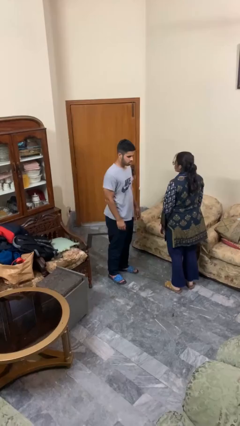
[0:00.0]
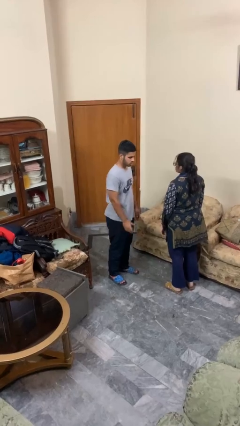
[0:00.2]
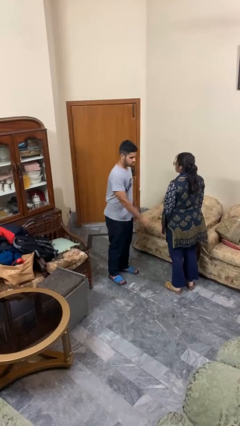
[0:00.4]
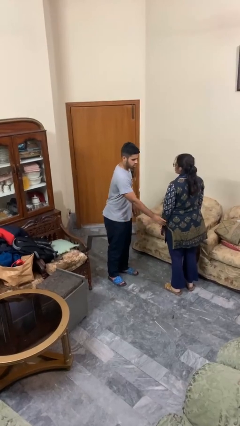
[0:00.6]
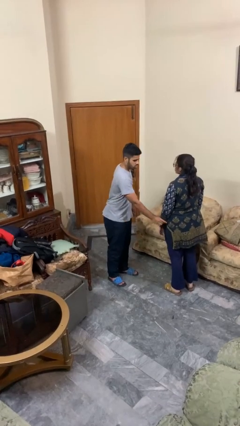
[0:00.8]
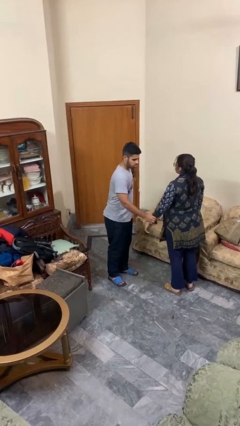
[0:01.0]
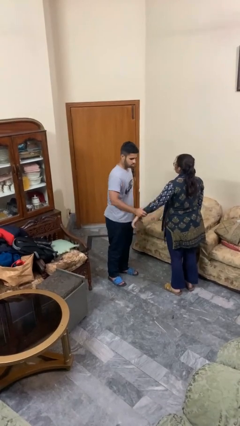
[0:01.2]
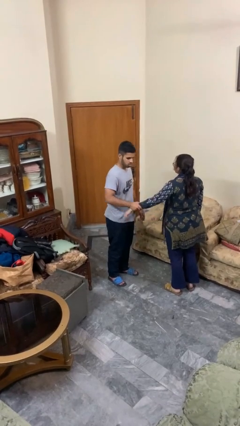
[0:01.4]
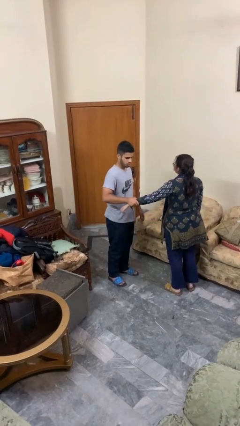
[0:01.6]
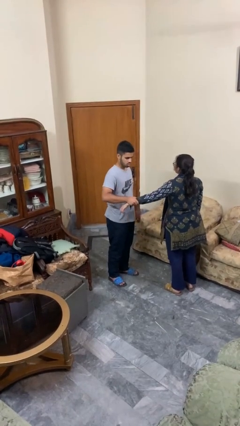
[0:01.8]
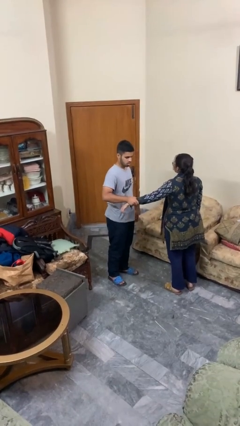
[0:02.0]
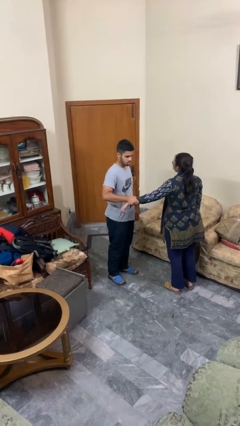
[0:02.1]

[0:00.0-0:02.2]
person grabs person by forearm

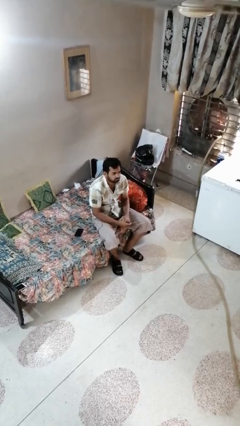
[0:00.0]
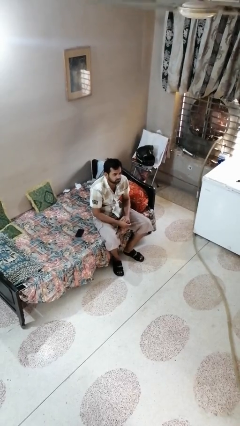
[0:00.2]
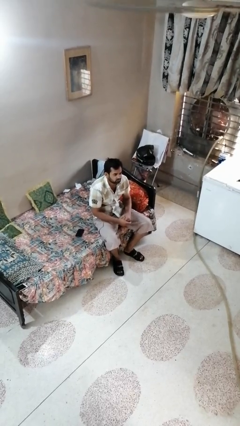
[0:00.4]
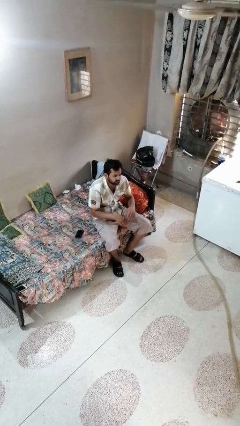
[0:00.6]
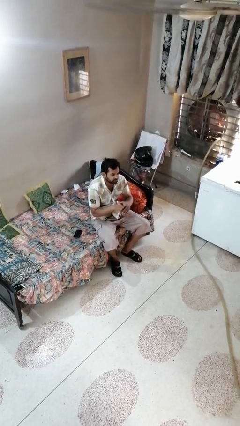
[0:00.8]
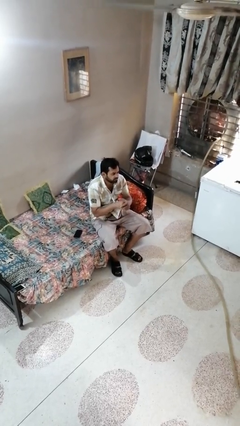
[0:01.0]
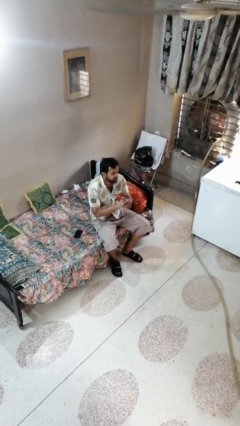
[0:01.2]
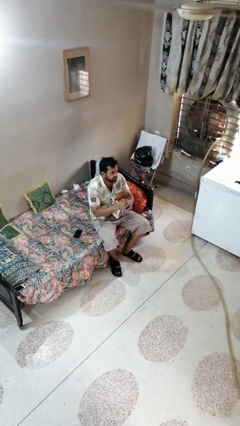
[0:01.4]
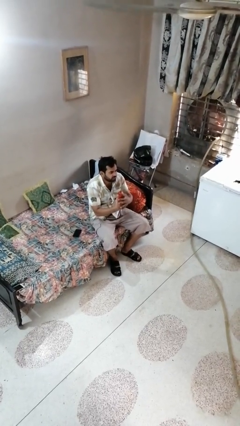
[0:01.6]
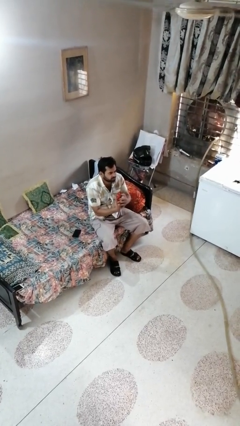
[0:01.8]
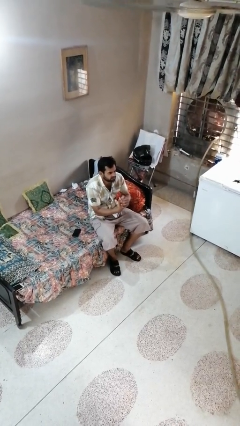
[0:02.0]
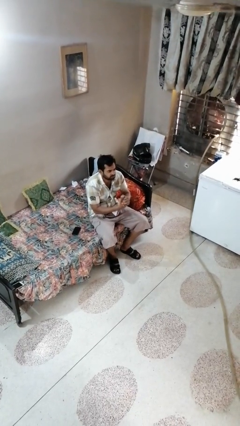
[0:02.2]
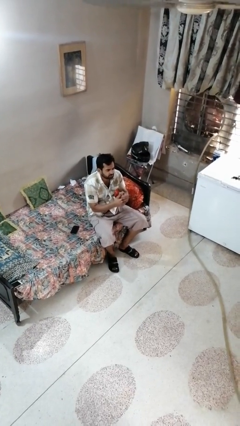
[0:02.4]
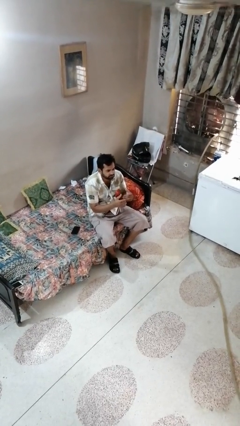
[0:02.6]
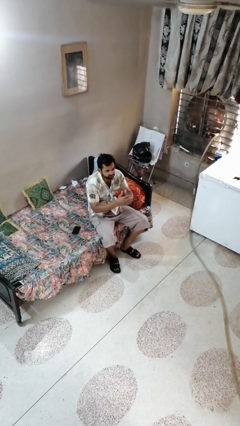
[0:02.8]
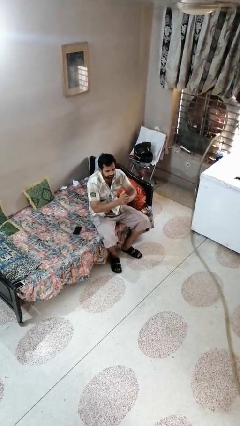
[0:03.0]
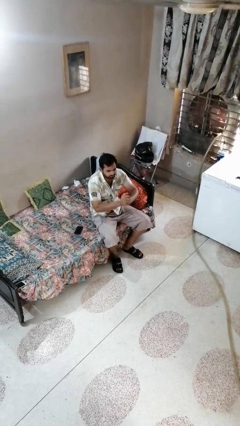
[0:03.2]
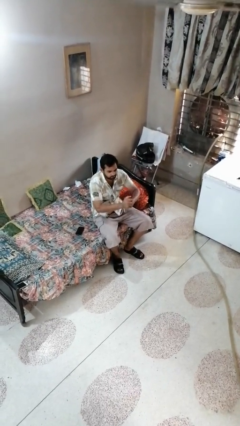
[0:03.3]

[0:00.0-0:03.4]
person cracks knuckles

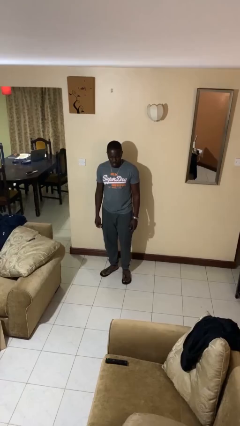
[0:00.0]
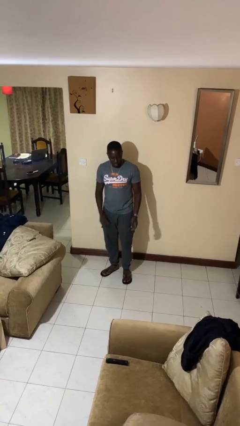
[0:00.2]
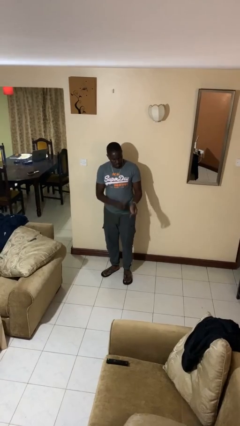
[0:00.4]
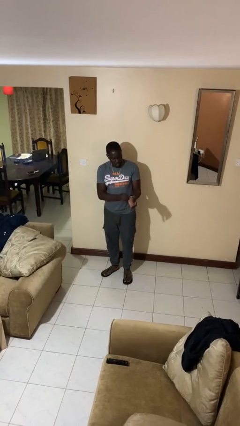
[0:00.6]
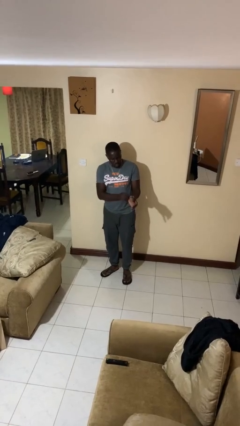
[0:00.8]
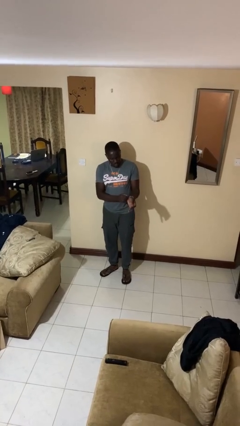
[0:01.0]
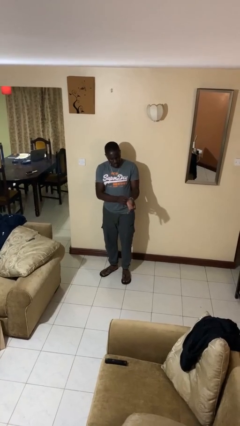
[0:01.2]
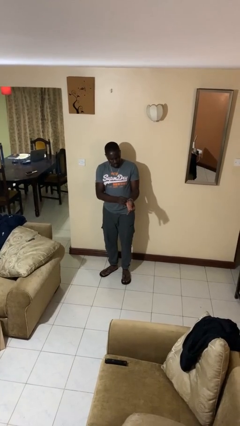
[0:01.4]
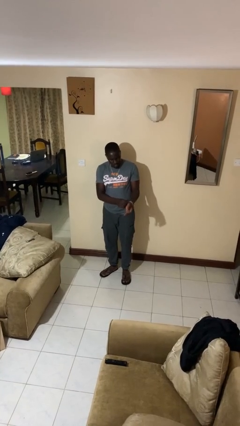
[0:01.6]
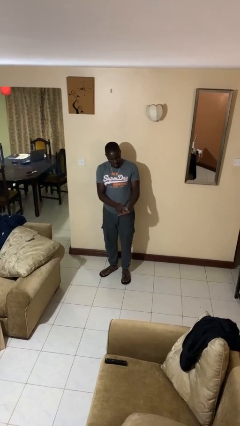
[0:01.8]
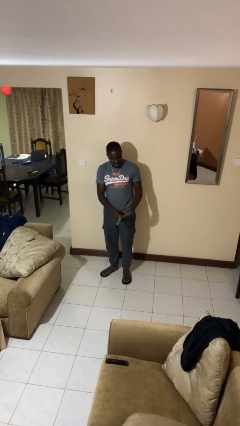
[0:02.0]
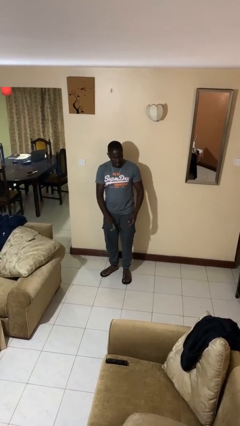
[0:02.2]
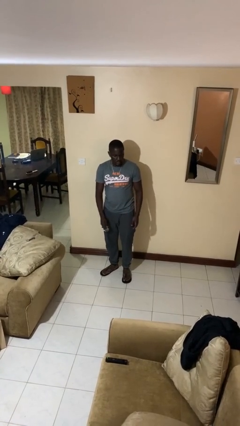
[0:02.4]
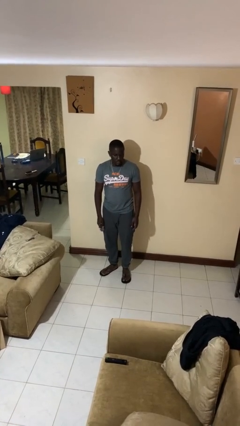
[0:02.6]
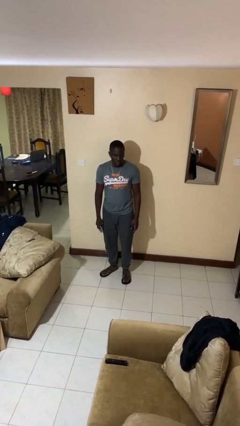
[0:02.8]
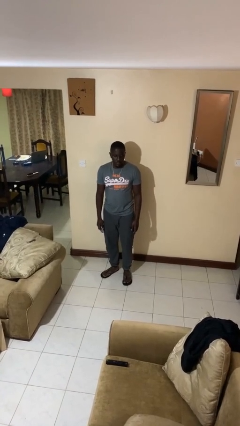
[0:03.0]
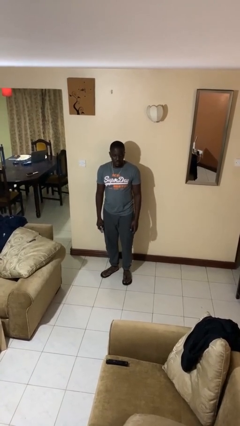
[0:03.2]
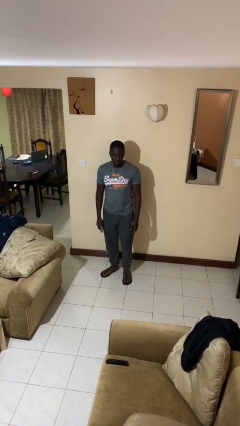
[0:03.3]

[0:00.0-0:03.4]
person takes off wristwatch

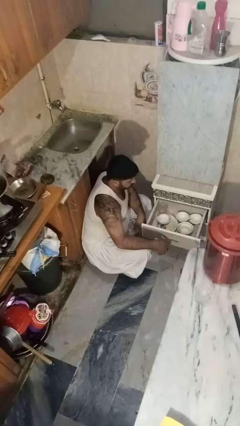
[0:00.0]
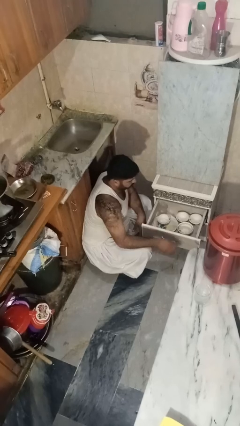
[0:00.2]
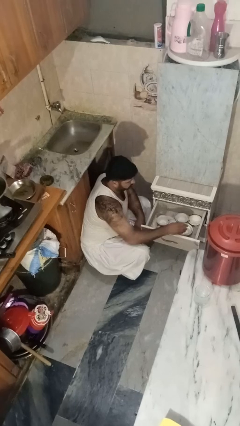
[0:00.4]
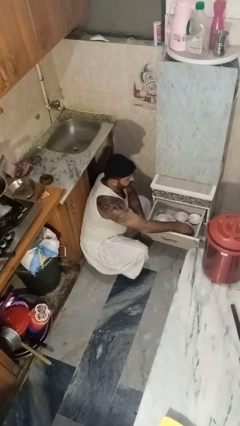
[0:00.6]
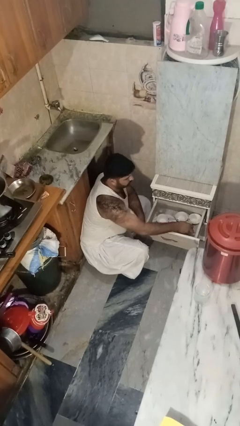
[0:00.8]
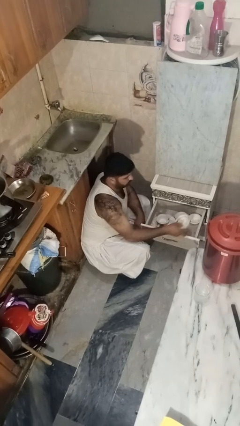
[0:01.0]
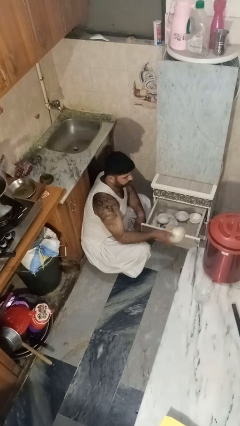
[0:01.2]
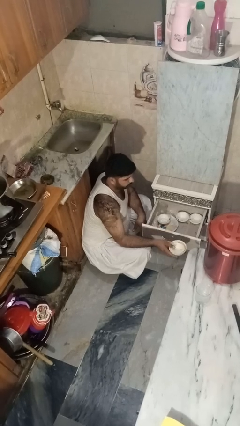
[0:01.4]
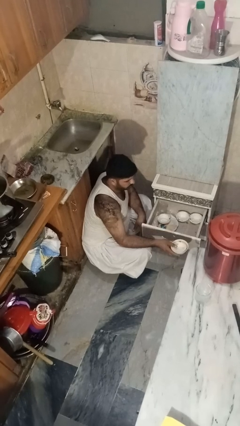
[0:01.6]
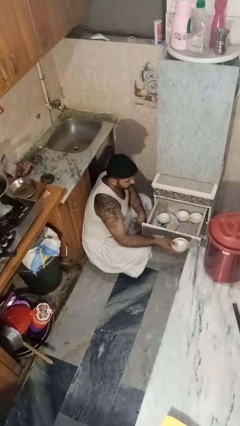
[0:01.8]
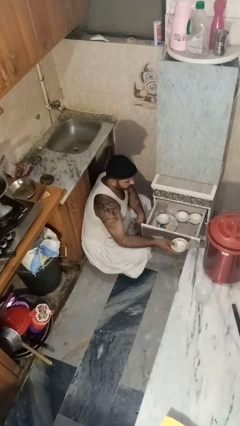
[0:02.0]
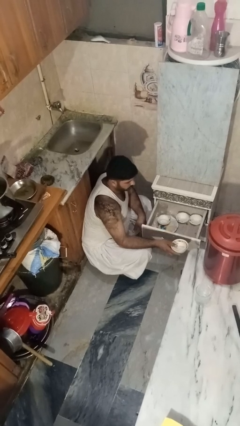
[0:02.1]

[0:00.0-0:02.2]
person takes object from kitchen drawer

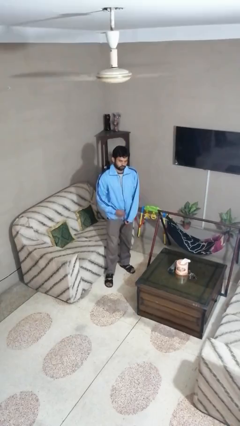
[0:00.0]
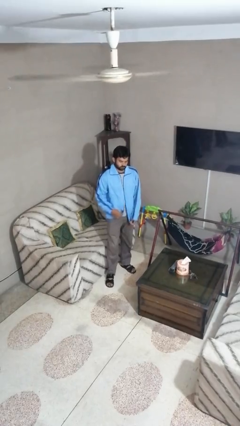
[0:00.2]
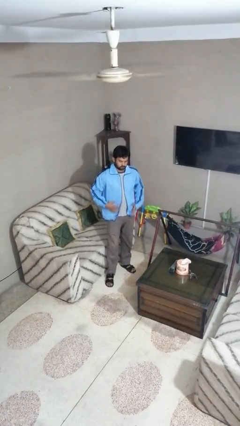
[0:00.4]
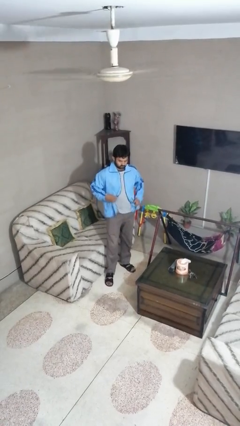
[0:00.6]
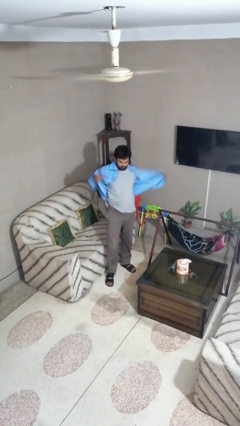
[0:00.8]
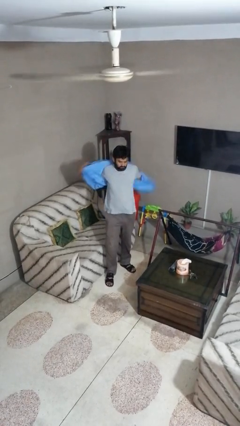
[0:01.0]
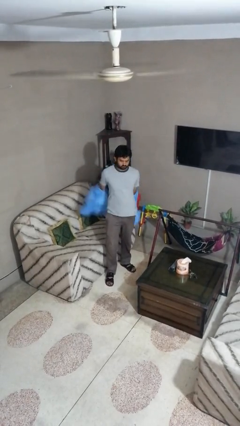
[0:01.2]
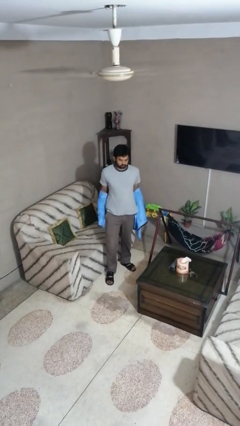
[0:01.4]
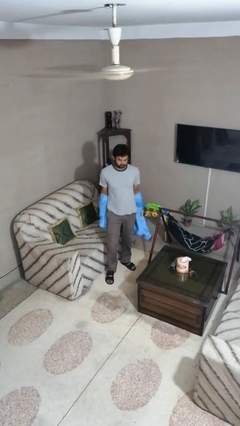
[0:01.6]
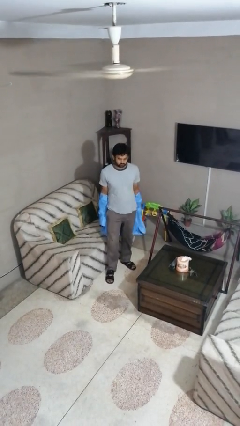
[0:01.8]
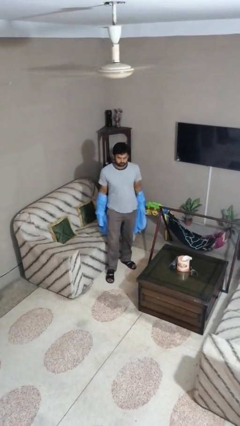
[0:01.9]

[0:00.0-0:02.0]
person takes off jacket

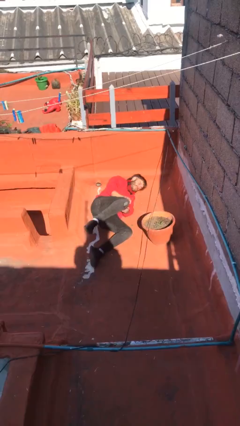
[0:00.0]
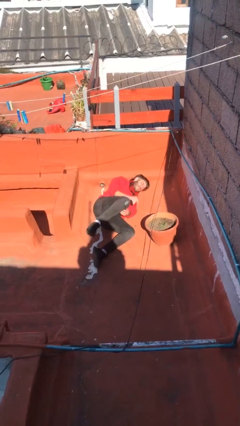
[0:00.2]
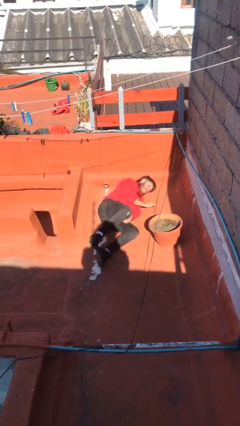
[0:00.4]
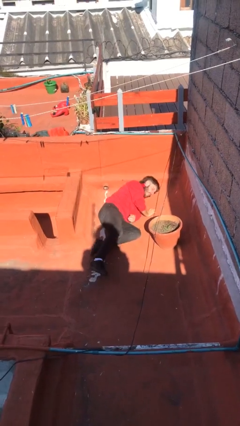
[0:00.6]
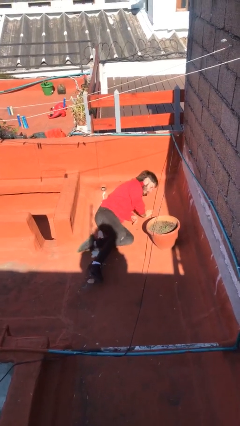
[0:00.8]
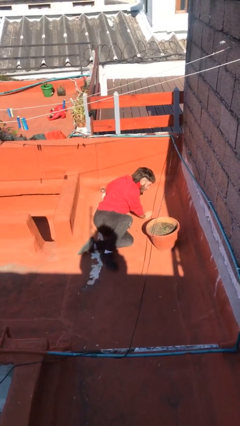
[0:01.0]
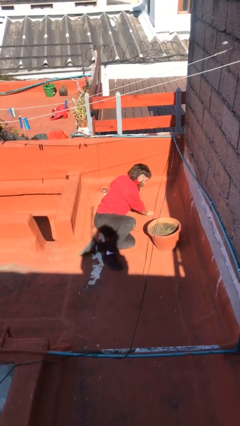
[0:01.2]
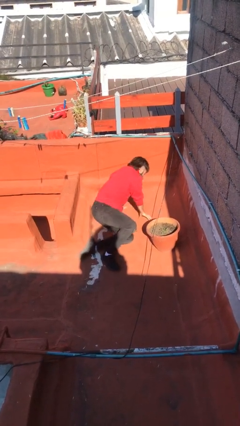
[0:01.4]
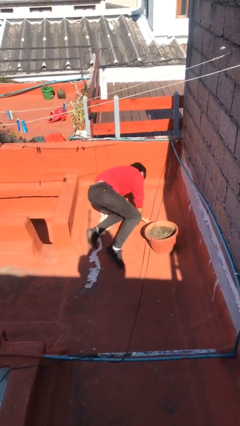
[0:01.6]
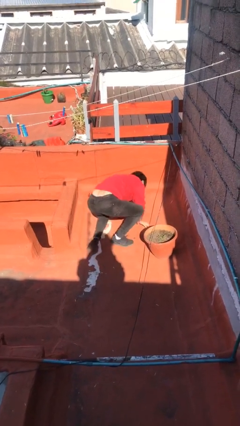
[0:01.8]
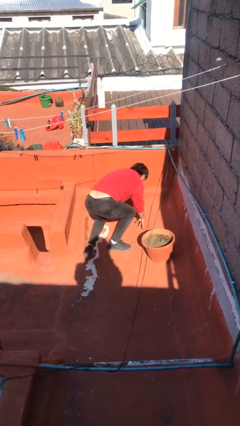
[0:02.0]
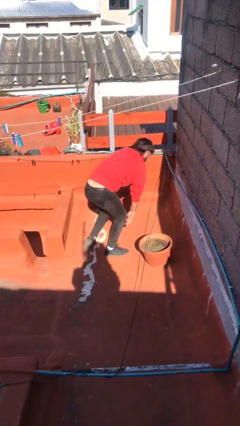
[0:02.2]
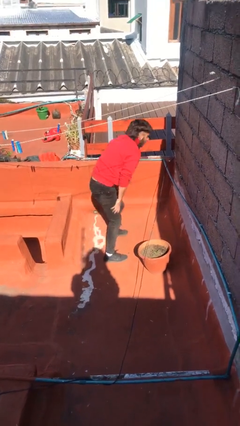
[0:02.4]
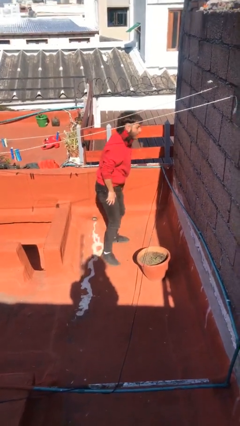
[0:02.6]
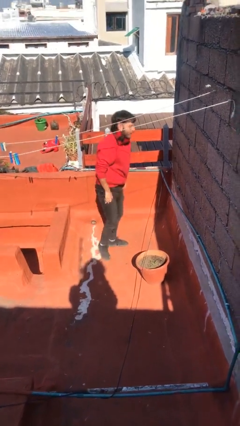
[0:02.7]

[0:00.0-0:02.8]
person stands up from floor

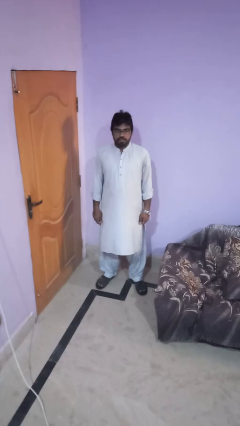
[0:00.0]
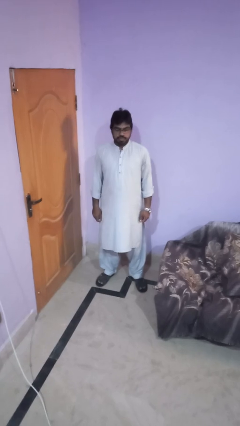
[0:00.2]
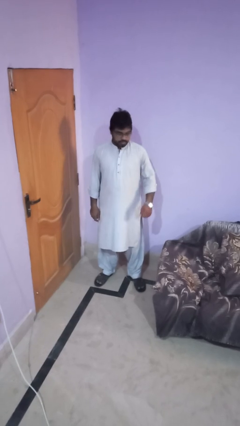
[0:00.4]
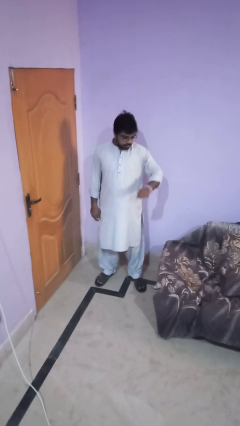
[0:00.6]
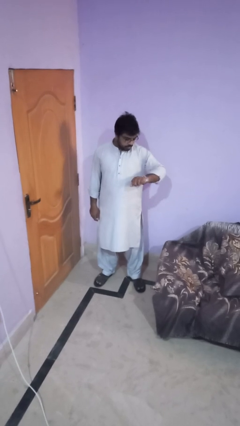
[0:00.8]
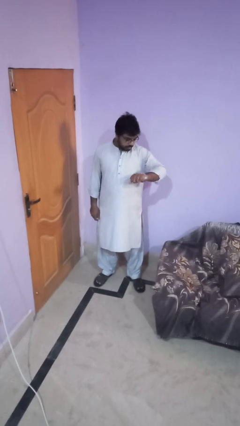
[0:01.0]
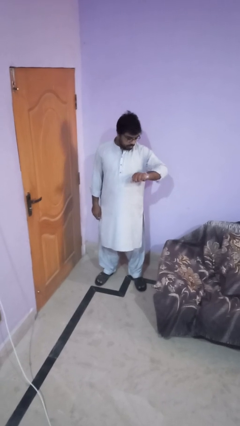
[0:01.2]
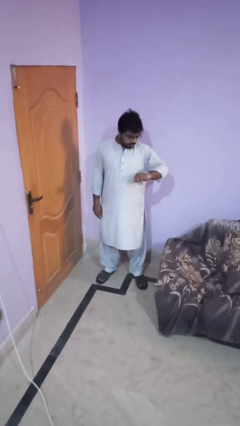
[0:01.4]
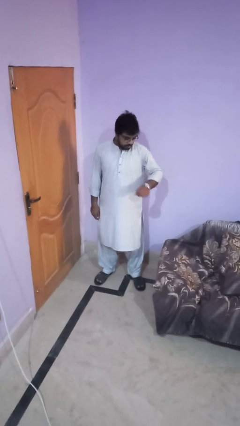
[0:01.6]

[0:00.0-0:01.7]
person looks at wristwatch
